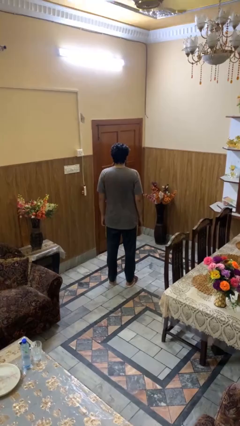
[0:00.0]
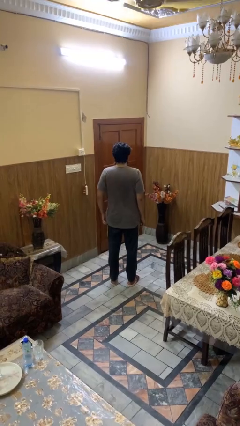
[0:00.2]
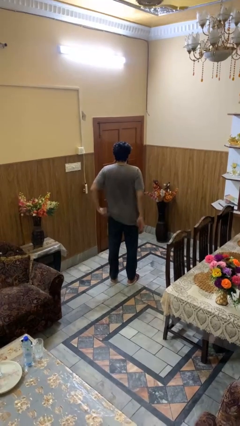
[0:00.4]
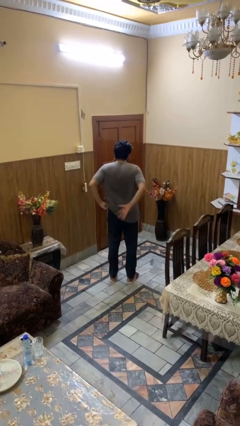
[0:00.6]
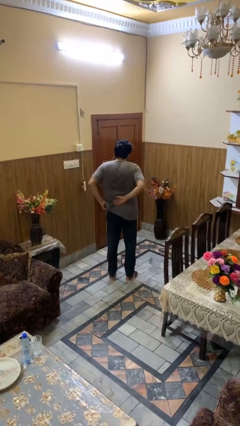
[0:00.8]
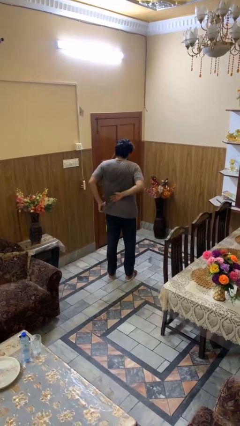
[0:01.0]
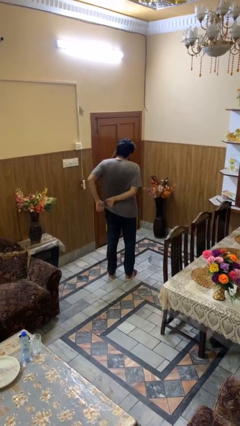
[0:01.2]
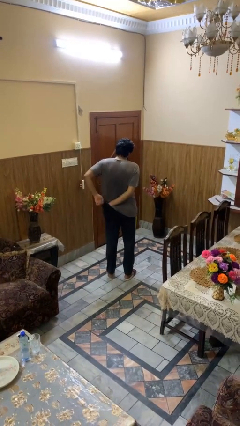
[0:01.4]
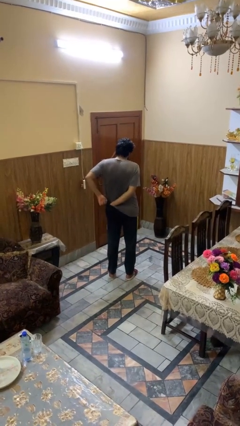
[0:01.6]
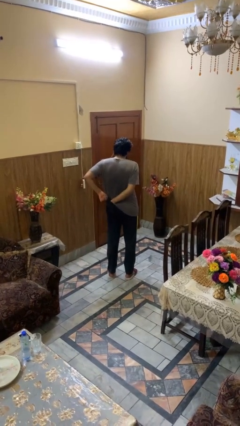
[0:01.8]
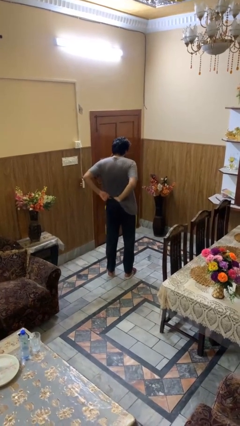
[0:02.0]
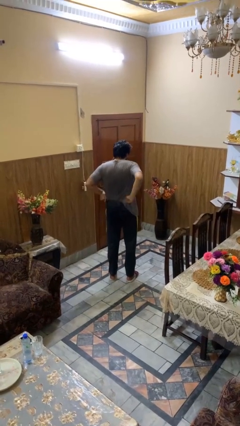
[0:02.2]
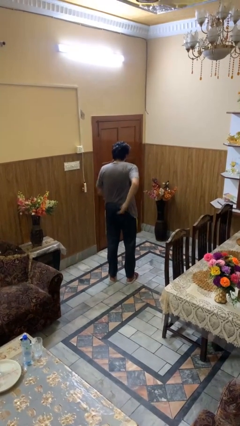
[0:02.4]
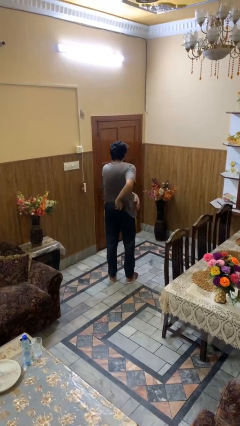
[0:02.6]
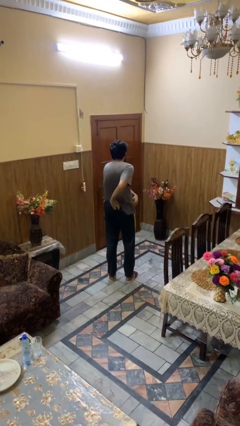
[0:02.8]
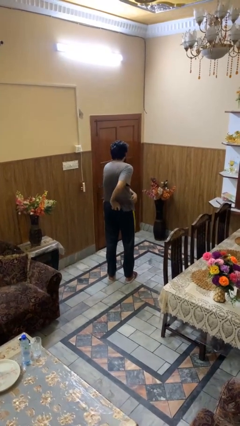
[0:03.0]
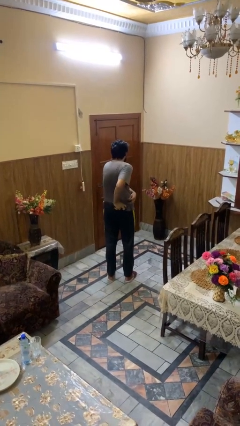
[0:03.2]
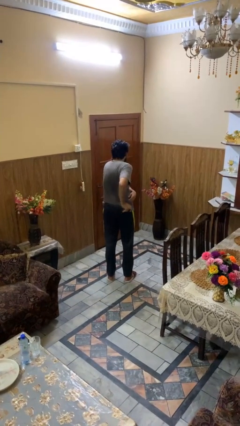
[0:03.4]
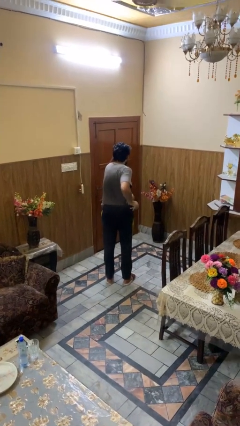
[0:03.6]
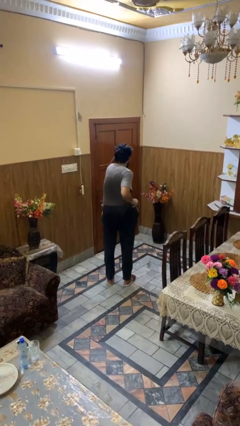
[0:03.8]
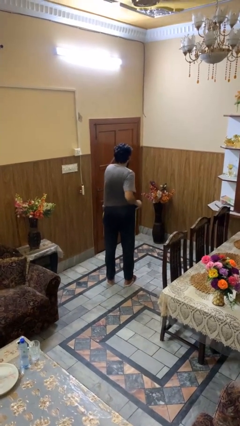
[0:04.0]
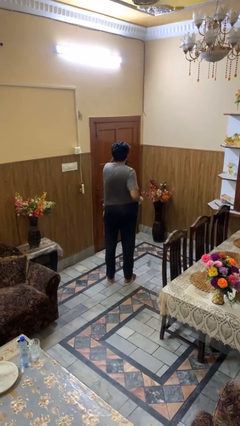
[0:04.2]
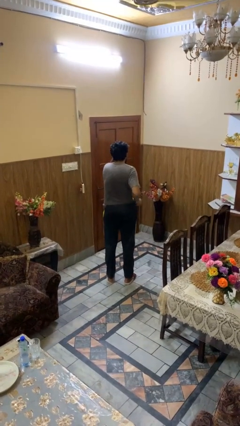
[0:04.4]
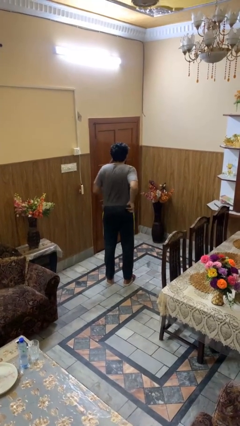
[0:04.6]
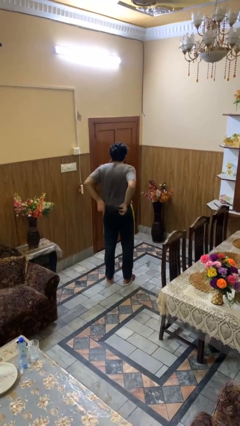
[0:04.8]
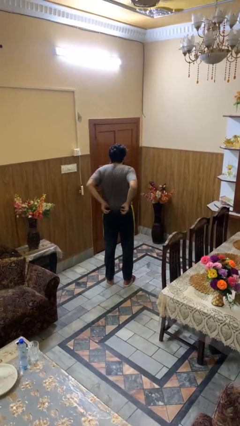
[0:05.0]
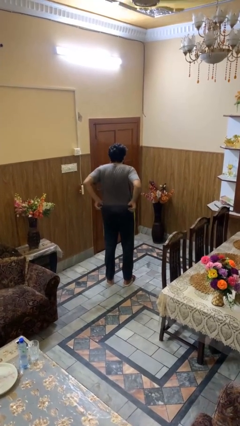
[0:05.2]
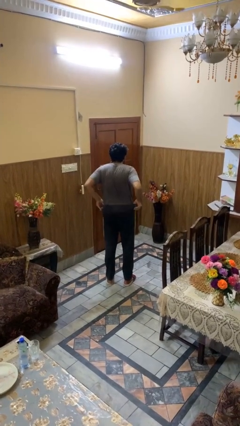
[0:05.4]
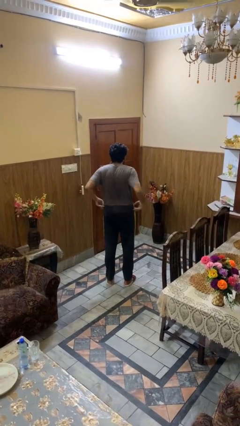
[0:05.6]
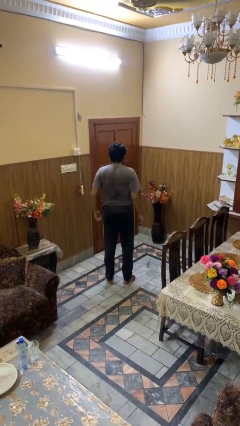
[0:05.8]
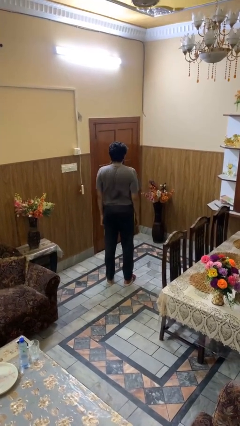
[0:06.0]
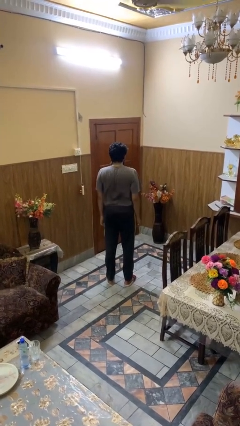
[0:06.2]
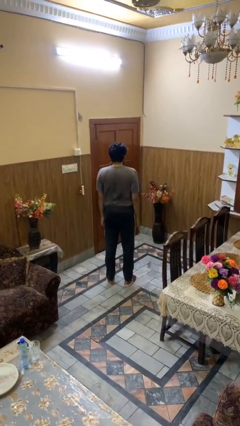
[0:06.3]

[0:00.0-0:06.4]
person tucks in shirt

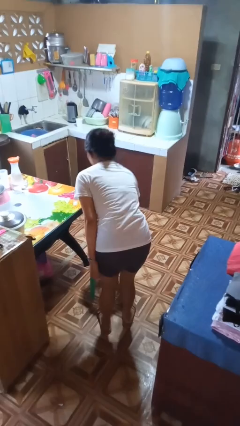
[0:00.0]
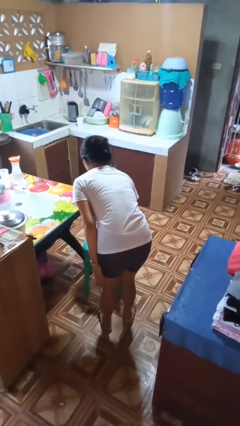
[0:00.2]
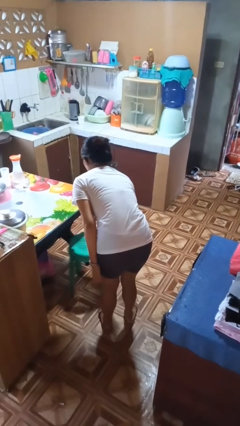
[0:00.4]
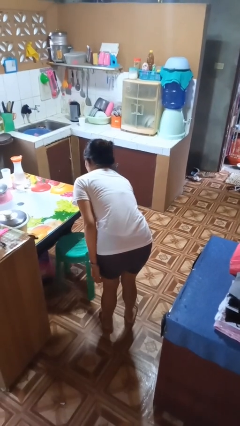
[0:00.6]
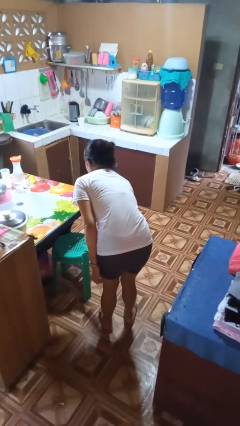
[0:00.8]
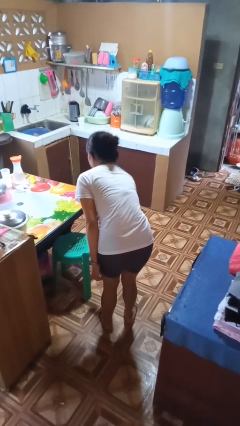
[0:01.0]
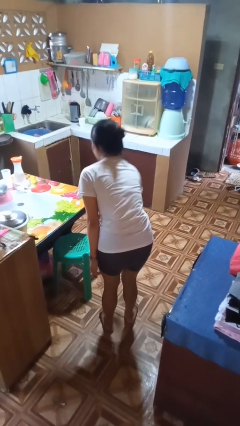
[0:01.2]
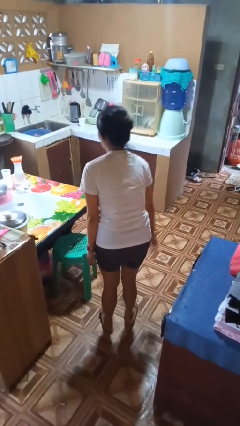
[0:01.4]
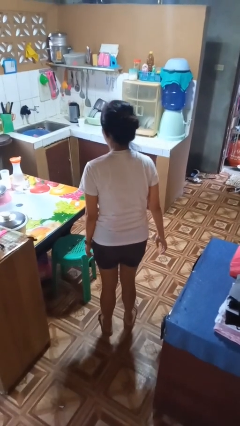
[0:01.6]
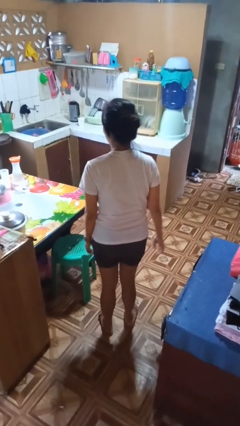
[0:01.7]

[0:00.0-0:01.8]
person pushes in chair

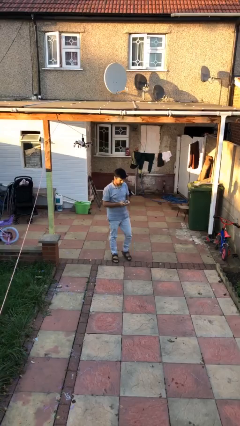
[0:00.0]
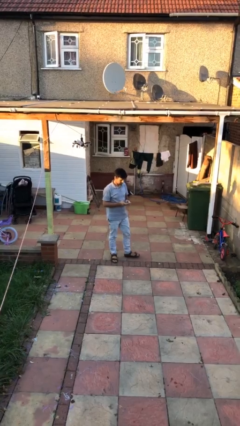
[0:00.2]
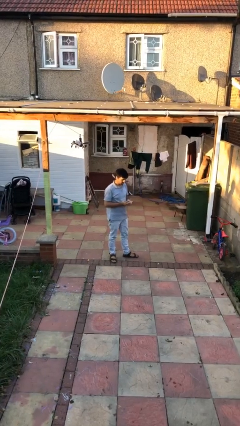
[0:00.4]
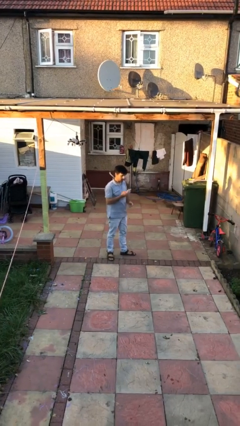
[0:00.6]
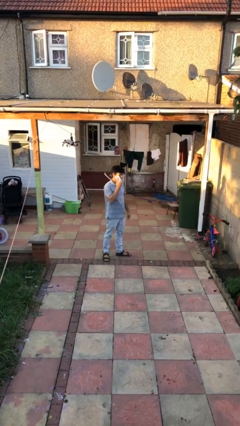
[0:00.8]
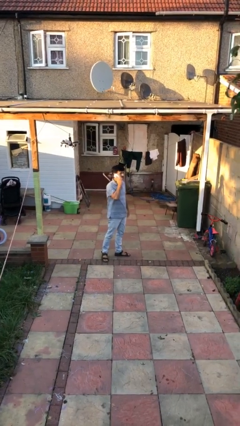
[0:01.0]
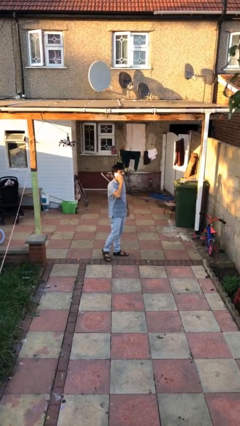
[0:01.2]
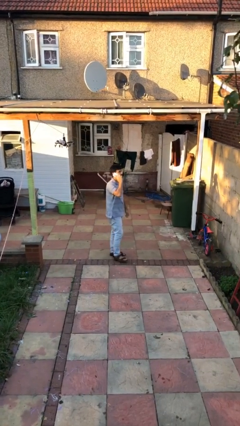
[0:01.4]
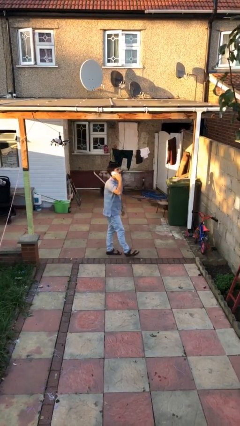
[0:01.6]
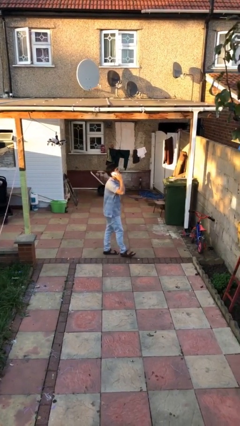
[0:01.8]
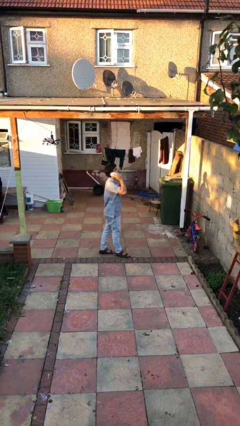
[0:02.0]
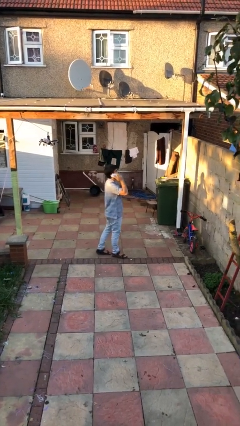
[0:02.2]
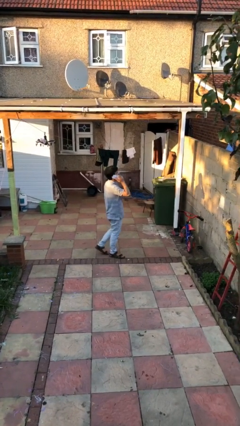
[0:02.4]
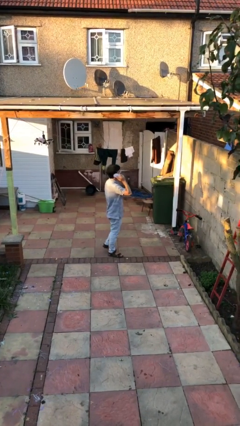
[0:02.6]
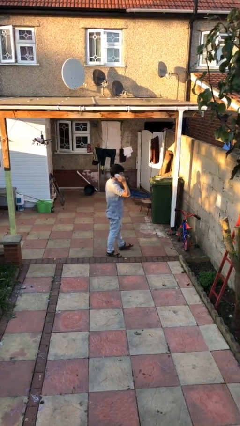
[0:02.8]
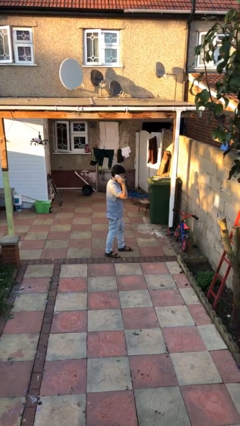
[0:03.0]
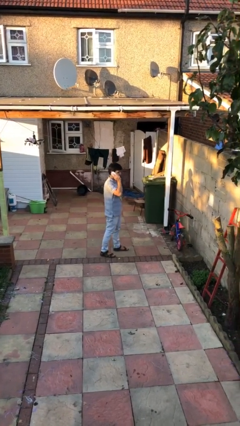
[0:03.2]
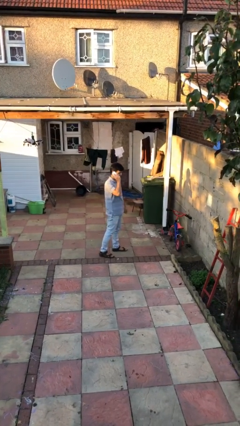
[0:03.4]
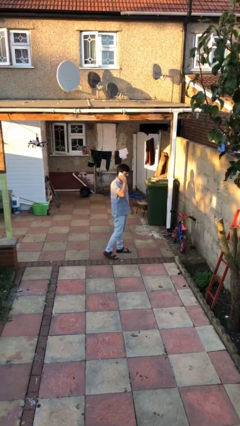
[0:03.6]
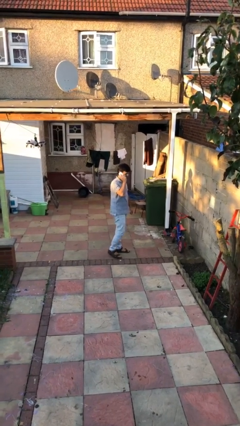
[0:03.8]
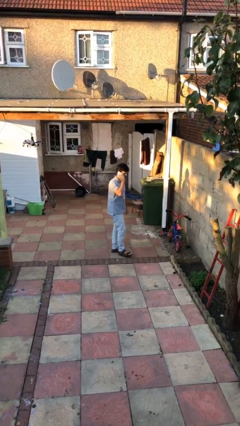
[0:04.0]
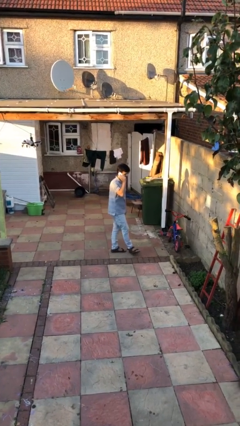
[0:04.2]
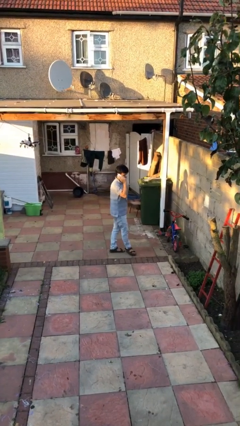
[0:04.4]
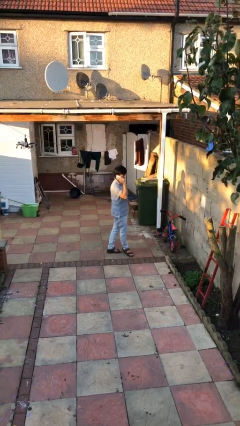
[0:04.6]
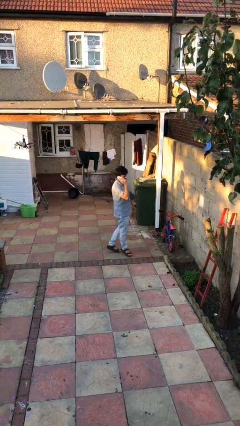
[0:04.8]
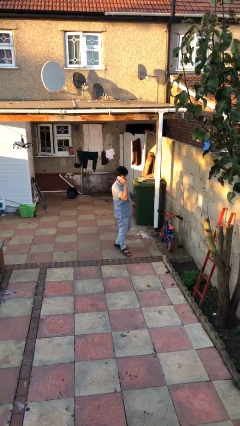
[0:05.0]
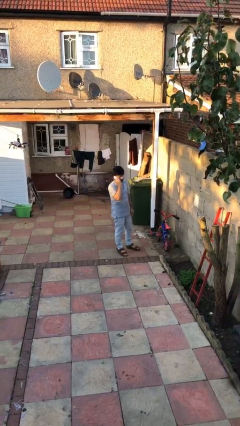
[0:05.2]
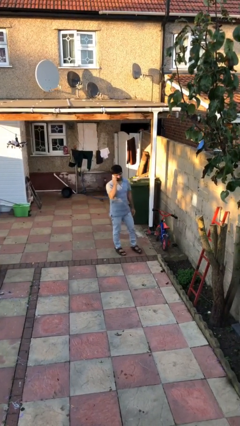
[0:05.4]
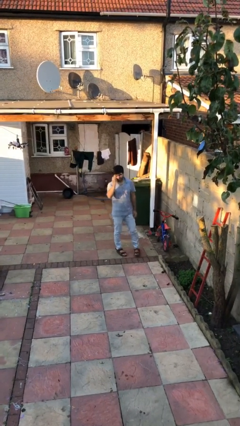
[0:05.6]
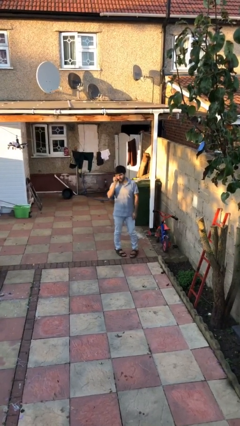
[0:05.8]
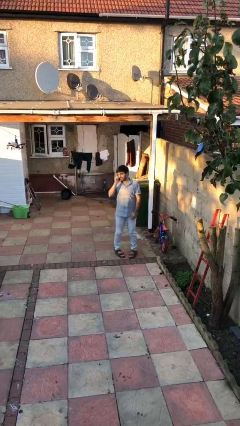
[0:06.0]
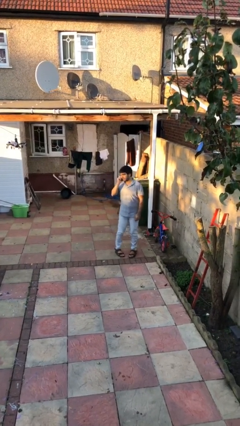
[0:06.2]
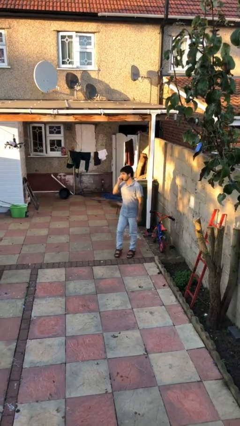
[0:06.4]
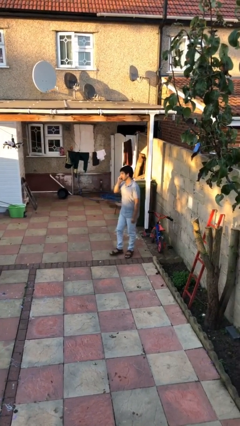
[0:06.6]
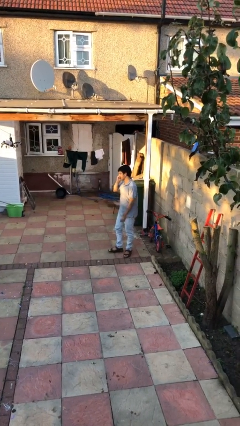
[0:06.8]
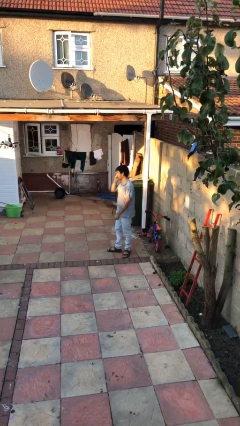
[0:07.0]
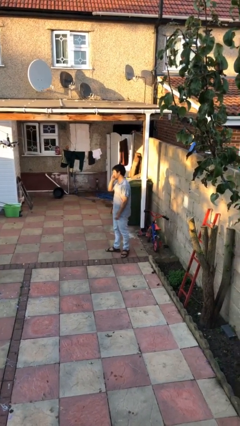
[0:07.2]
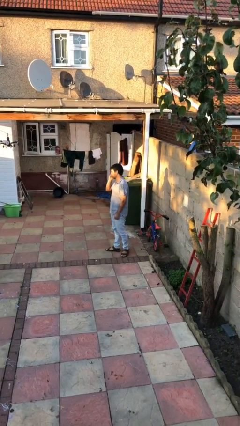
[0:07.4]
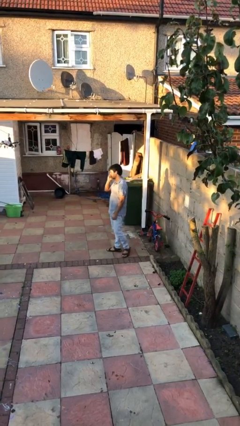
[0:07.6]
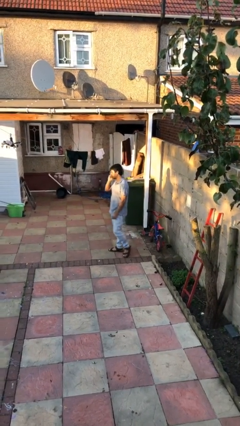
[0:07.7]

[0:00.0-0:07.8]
person talks on phone

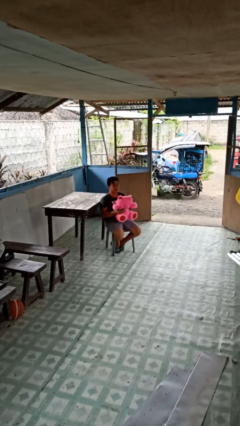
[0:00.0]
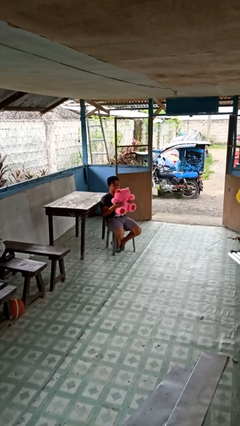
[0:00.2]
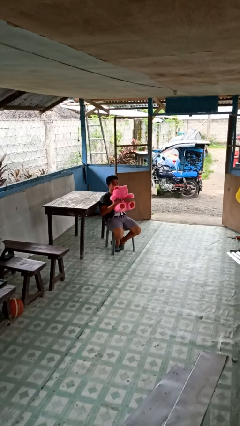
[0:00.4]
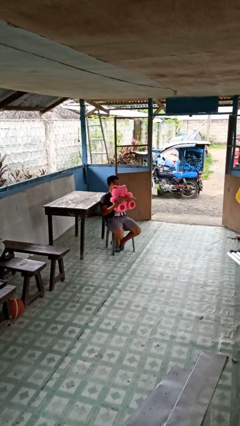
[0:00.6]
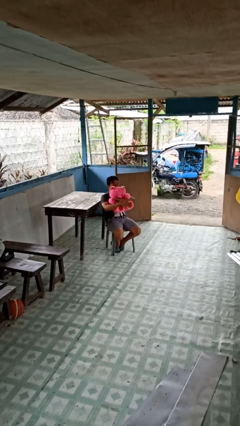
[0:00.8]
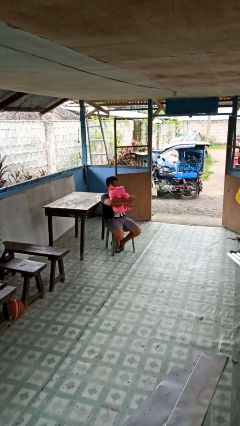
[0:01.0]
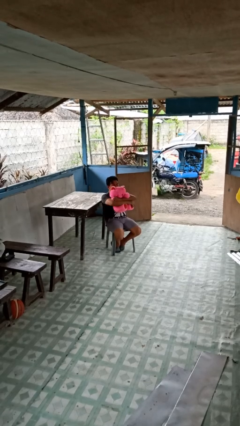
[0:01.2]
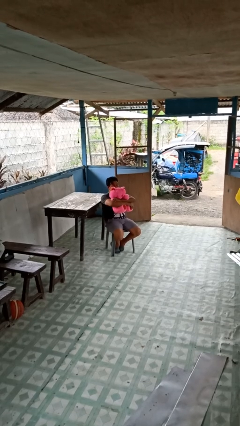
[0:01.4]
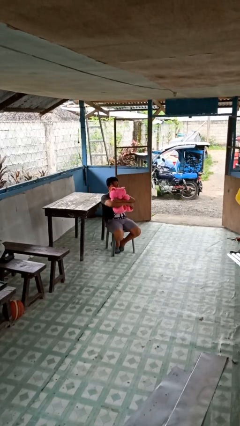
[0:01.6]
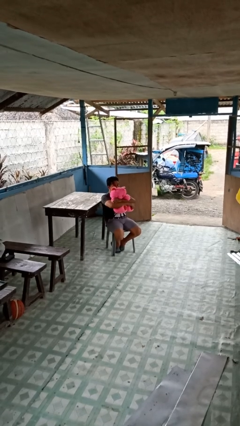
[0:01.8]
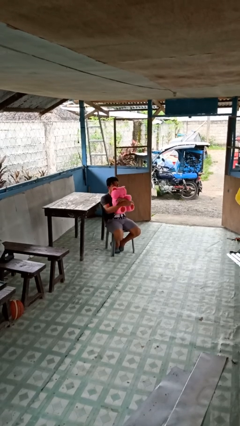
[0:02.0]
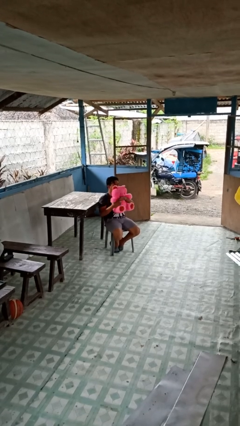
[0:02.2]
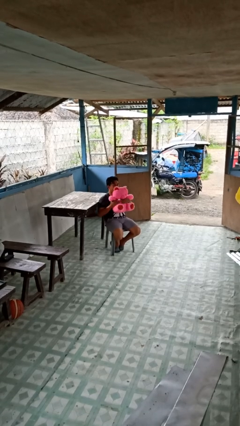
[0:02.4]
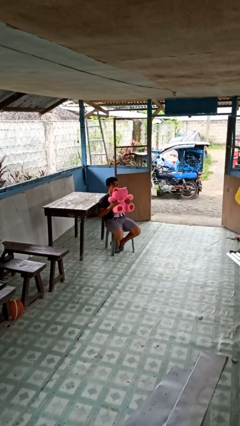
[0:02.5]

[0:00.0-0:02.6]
person hugs stuffed animal
